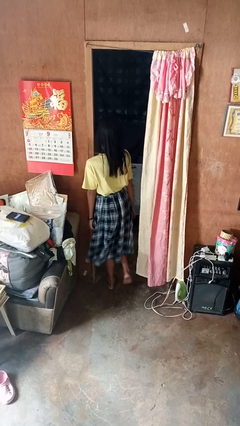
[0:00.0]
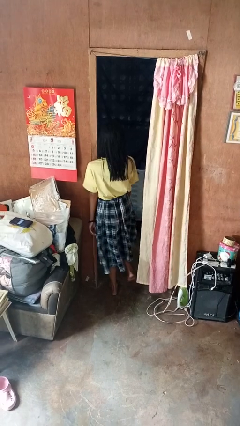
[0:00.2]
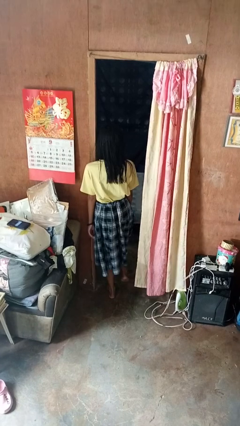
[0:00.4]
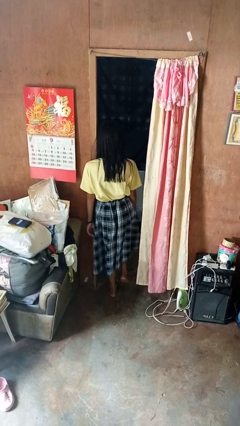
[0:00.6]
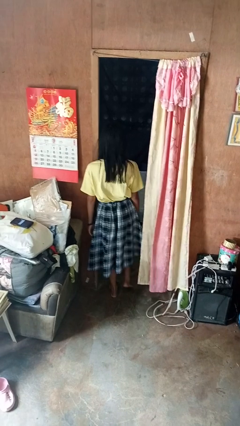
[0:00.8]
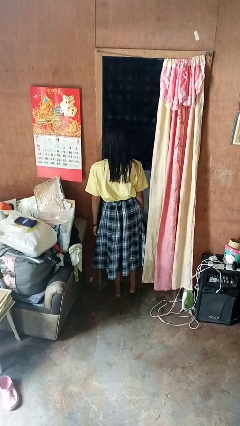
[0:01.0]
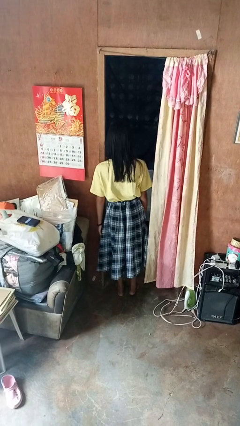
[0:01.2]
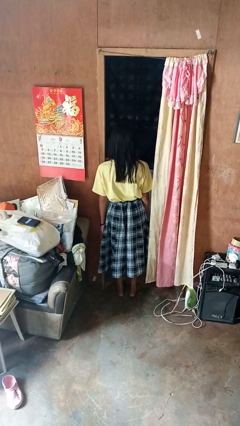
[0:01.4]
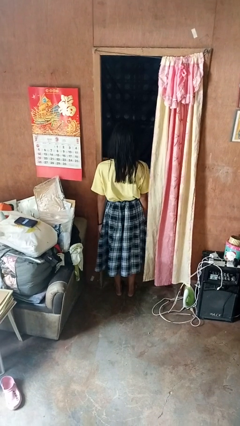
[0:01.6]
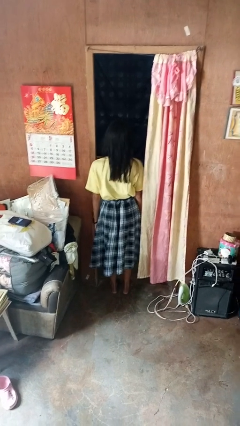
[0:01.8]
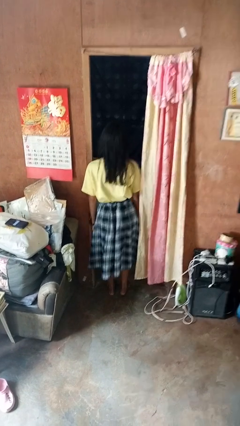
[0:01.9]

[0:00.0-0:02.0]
person bumps into wall

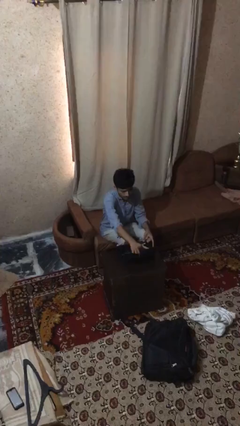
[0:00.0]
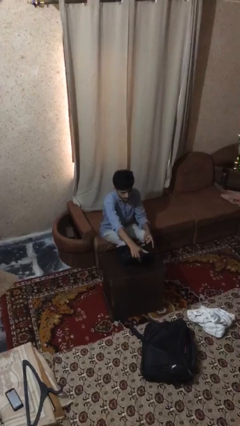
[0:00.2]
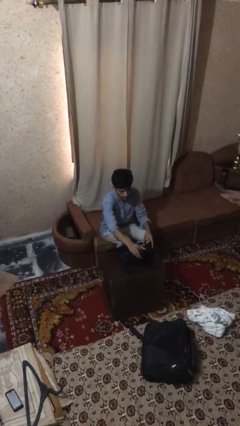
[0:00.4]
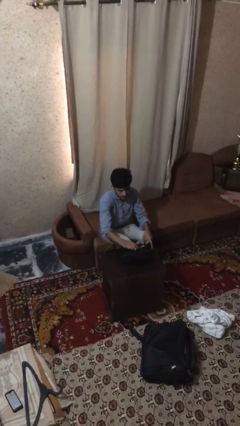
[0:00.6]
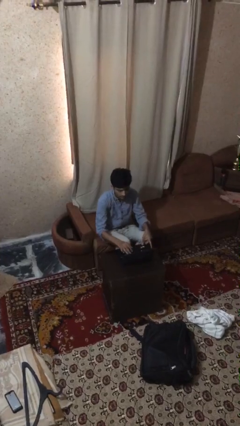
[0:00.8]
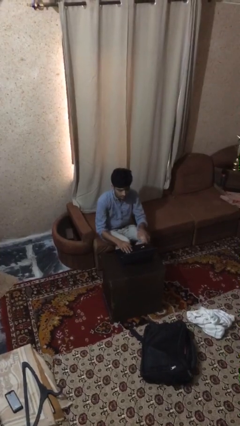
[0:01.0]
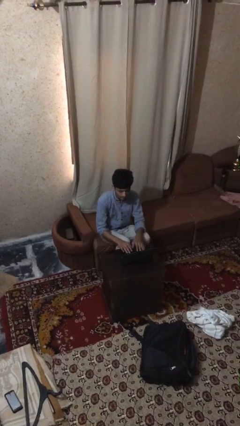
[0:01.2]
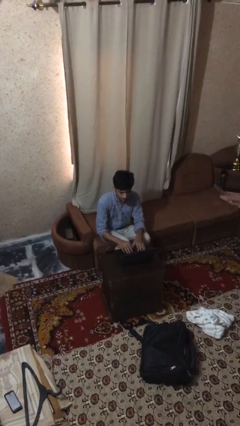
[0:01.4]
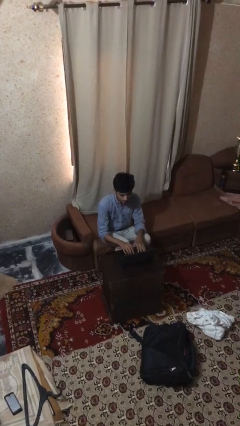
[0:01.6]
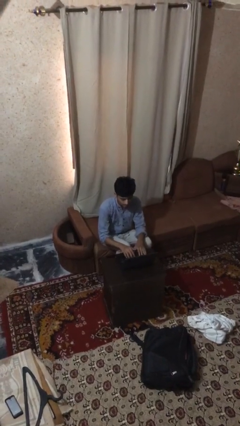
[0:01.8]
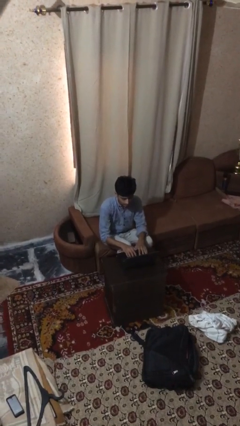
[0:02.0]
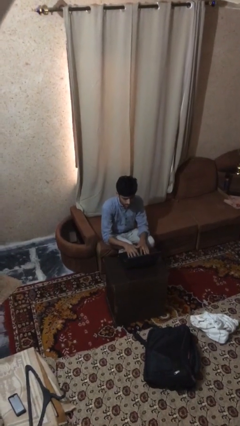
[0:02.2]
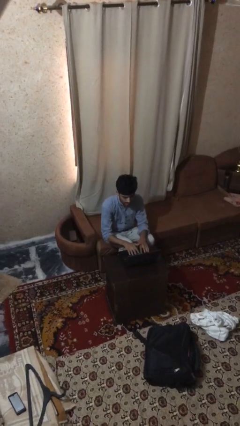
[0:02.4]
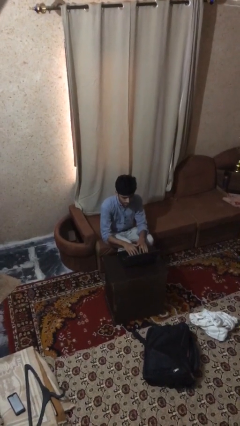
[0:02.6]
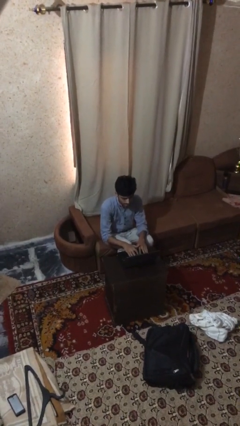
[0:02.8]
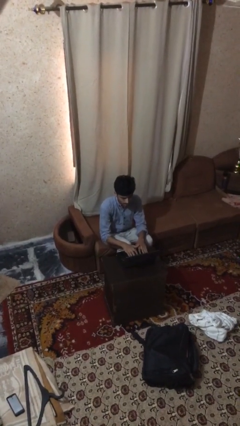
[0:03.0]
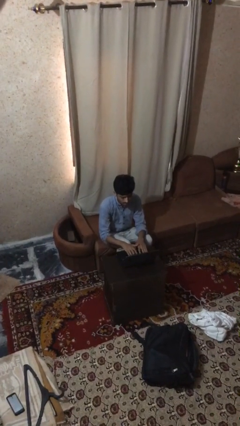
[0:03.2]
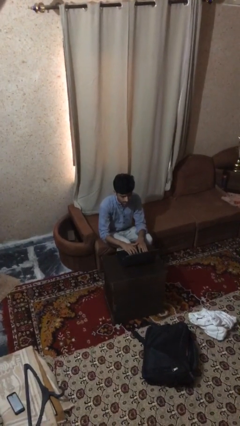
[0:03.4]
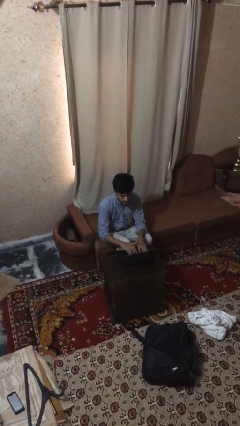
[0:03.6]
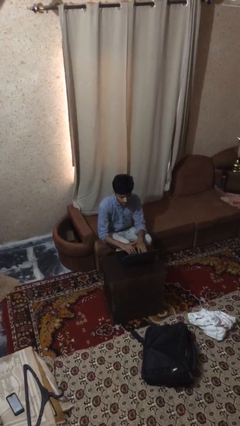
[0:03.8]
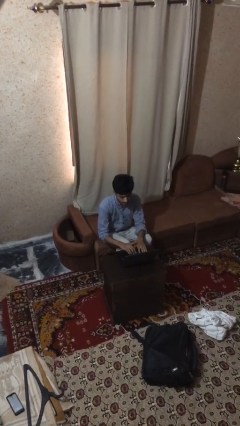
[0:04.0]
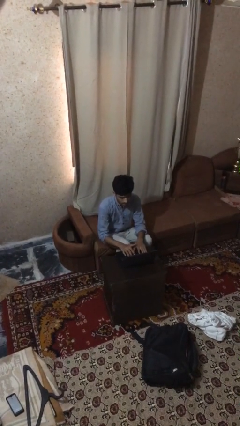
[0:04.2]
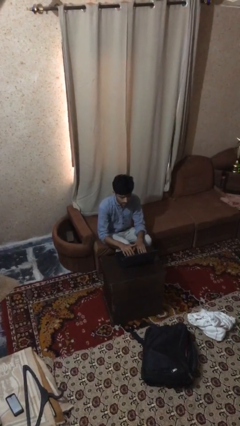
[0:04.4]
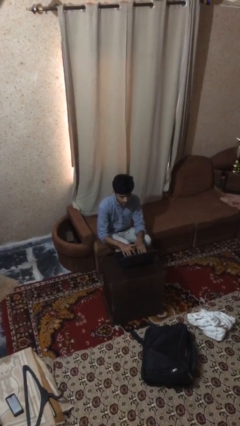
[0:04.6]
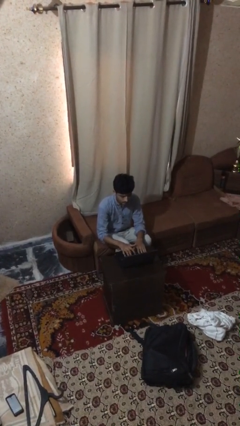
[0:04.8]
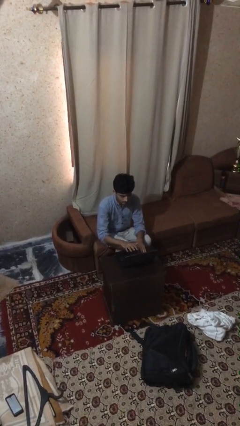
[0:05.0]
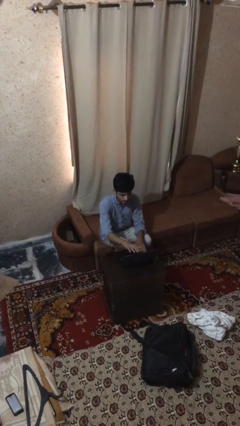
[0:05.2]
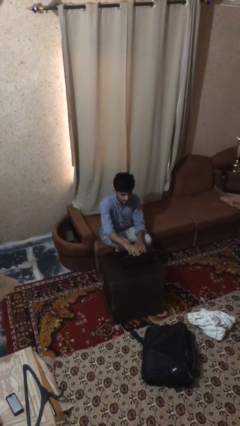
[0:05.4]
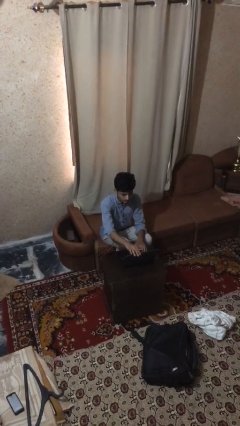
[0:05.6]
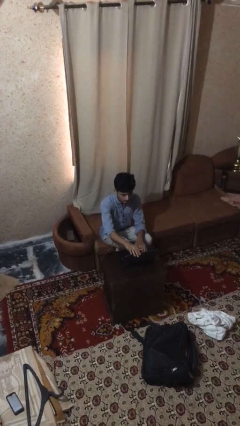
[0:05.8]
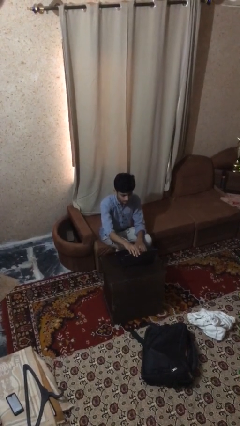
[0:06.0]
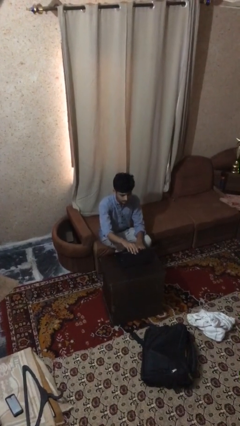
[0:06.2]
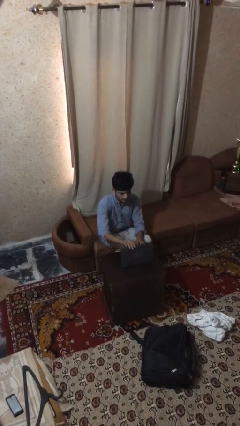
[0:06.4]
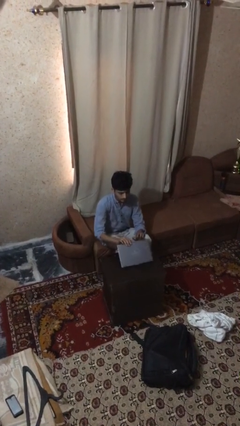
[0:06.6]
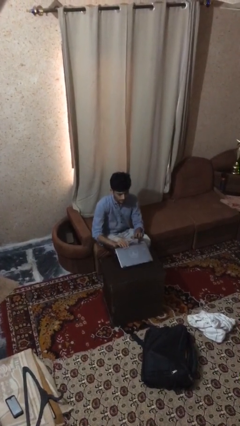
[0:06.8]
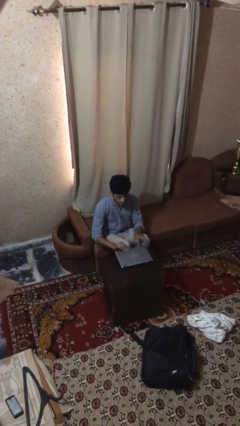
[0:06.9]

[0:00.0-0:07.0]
person interacts with laptop

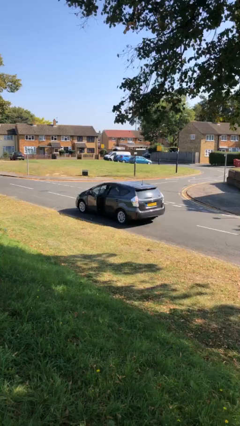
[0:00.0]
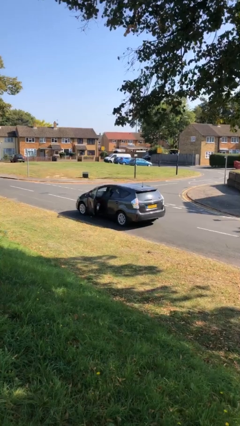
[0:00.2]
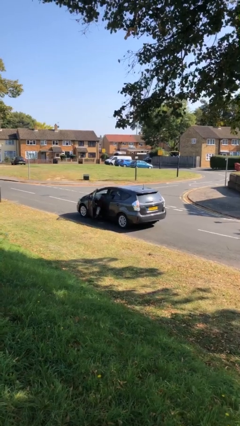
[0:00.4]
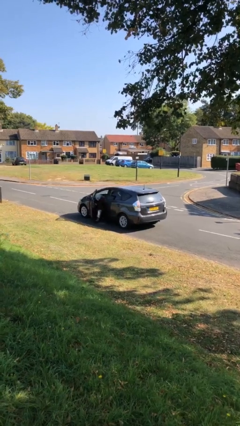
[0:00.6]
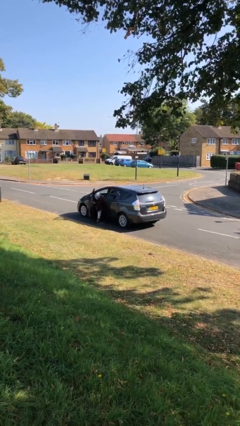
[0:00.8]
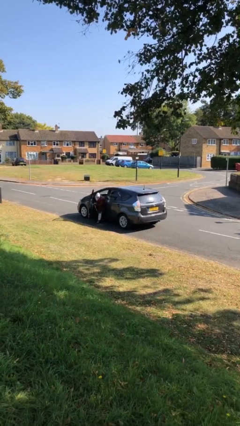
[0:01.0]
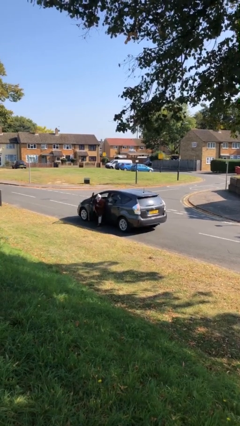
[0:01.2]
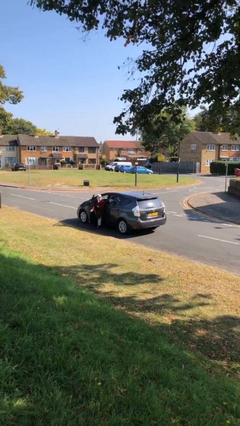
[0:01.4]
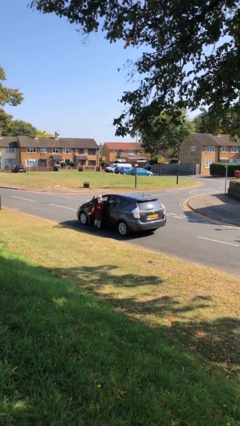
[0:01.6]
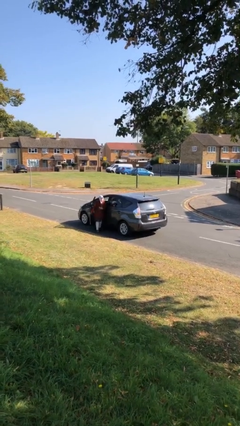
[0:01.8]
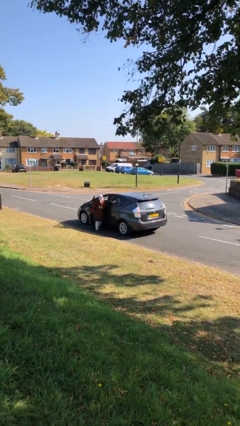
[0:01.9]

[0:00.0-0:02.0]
car drops off person

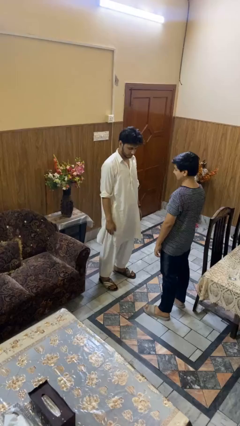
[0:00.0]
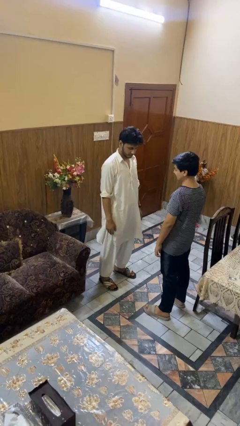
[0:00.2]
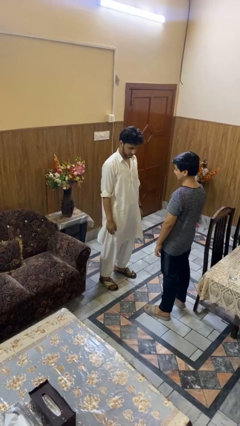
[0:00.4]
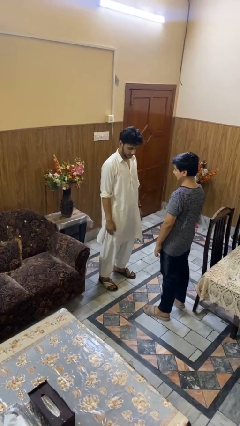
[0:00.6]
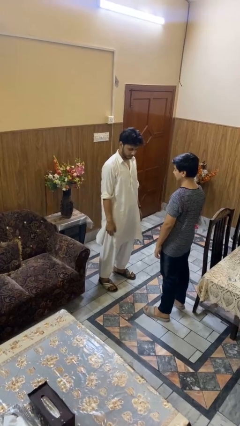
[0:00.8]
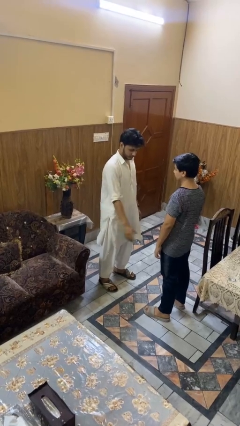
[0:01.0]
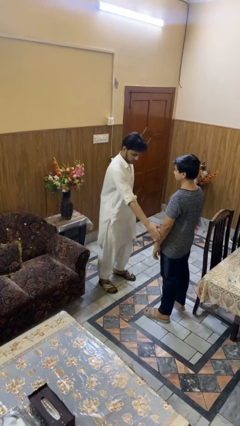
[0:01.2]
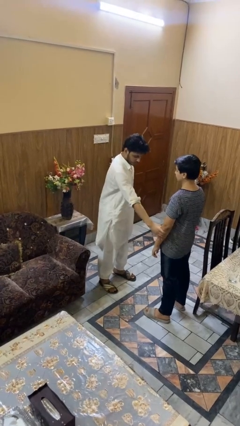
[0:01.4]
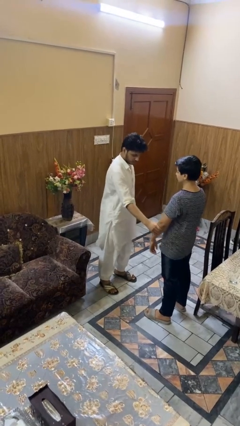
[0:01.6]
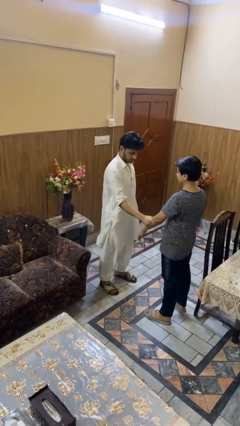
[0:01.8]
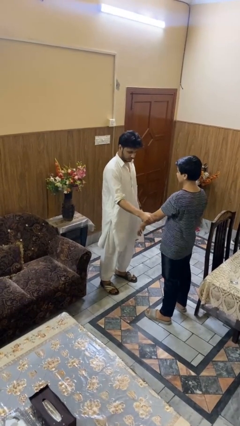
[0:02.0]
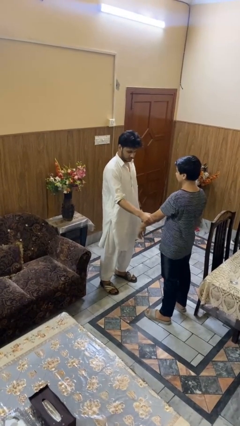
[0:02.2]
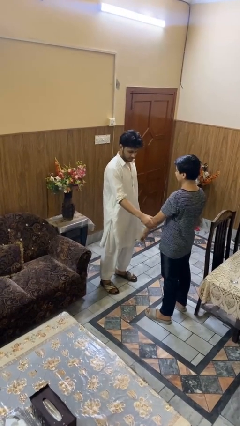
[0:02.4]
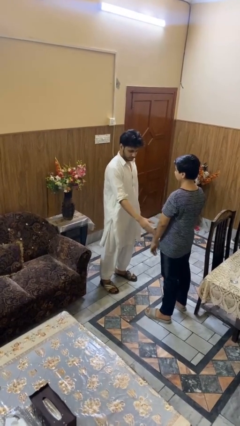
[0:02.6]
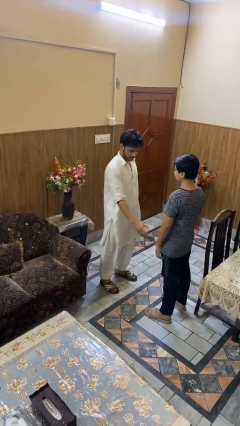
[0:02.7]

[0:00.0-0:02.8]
person grabs person by forearm

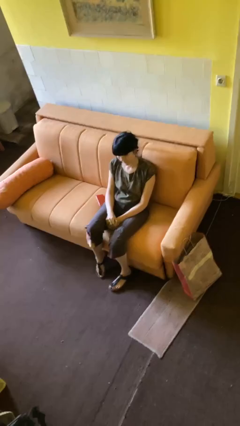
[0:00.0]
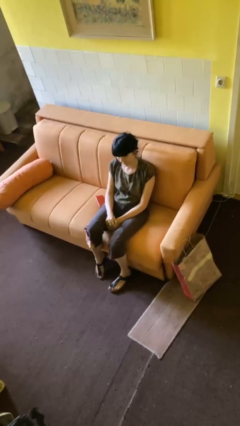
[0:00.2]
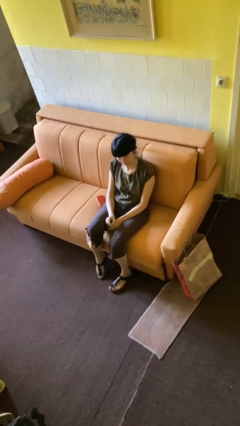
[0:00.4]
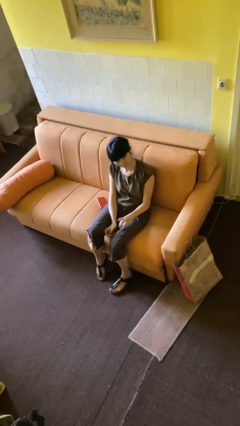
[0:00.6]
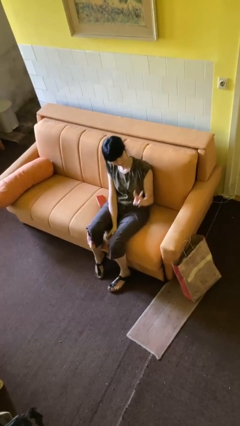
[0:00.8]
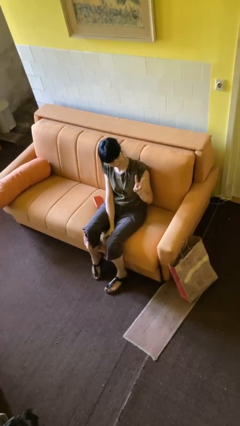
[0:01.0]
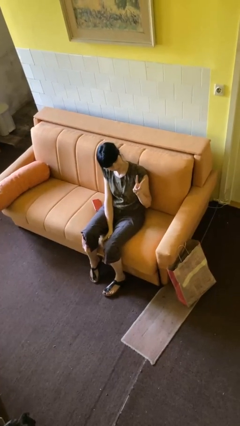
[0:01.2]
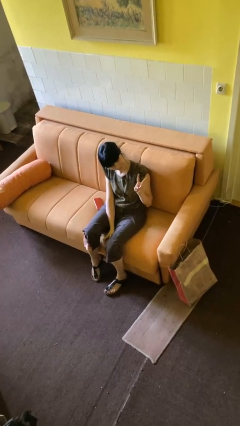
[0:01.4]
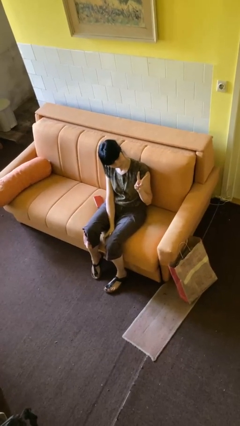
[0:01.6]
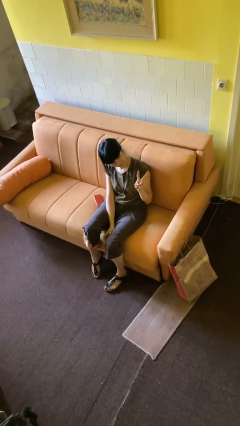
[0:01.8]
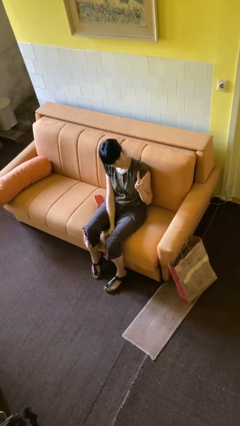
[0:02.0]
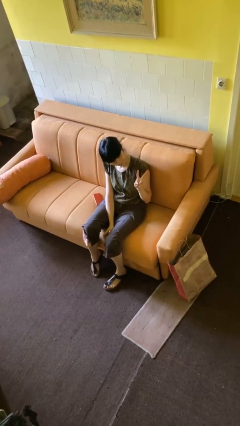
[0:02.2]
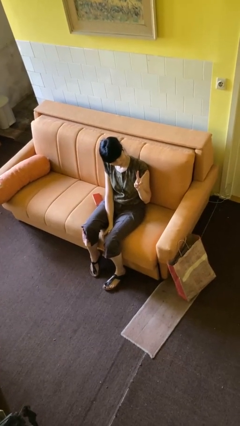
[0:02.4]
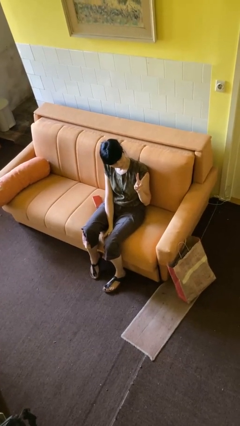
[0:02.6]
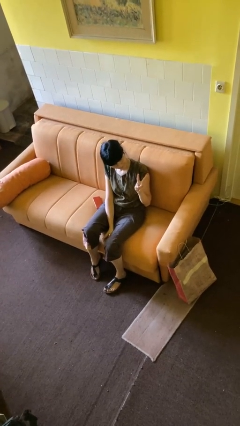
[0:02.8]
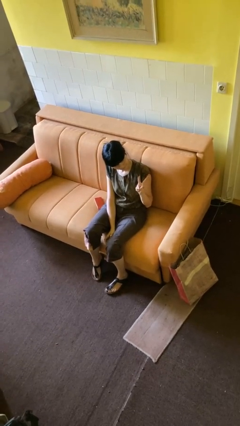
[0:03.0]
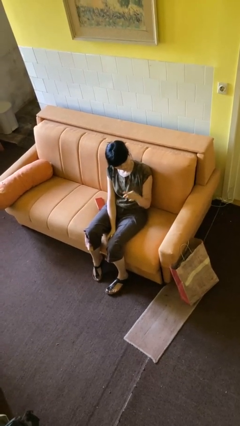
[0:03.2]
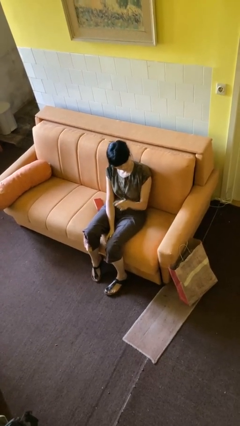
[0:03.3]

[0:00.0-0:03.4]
person gestures peace

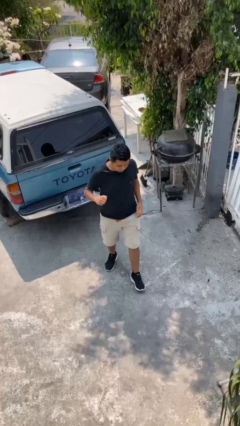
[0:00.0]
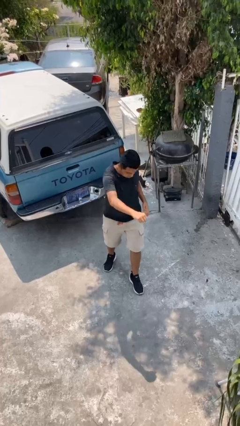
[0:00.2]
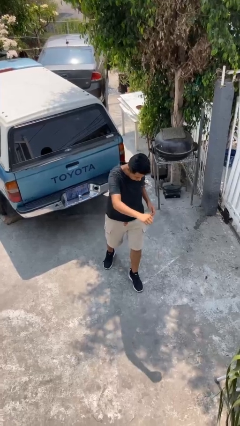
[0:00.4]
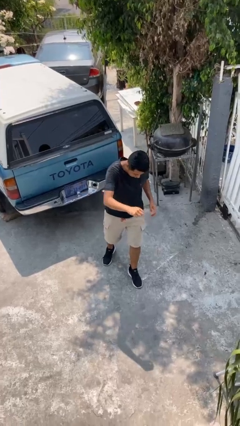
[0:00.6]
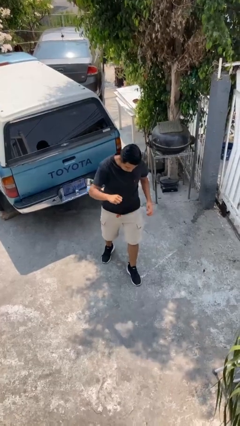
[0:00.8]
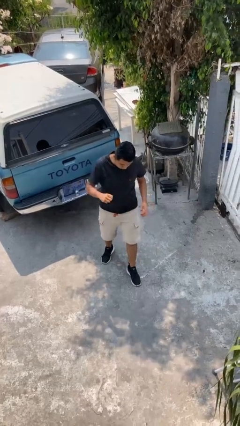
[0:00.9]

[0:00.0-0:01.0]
person punches
